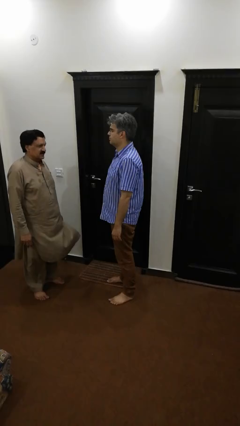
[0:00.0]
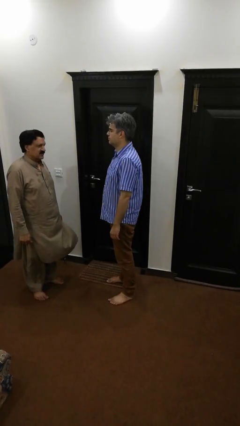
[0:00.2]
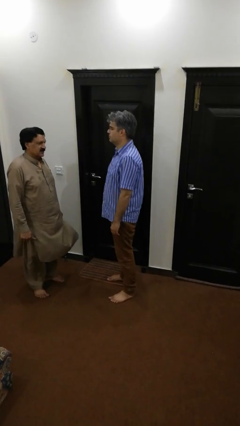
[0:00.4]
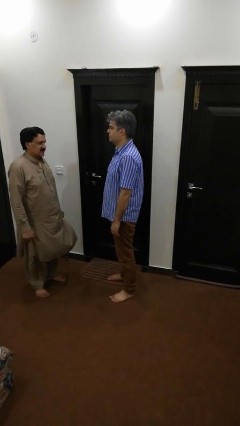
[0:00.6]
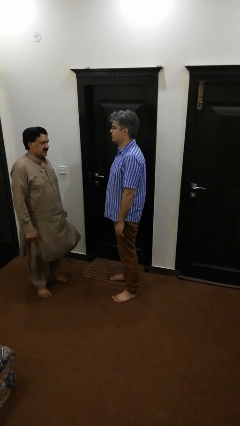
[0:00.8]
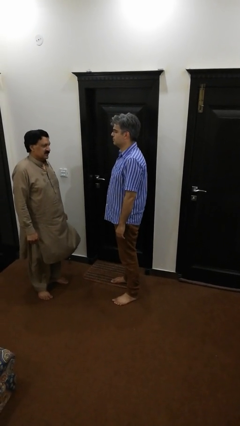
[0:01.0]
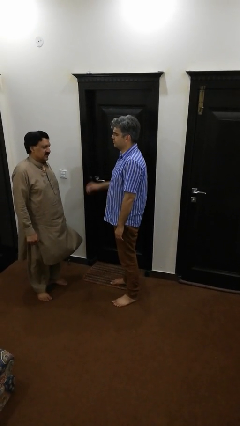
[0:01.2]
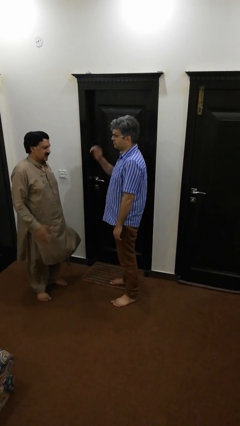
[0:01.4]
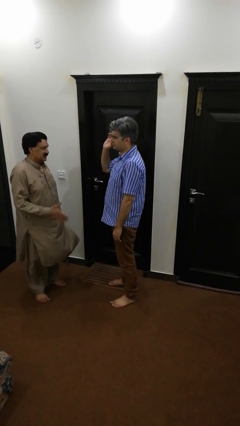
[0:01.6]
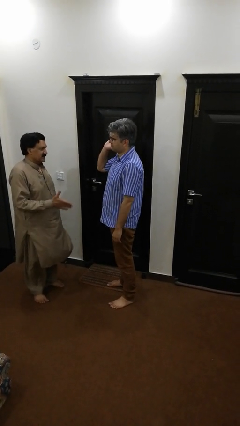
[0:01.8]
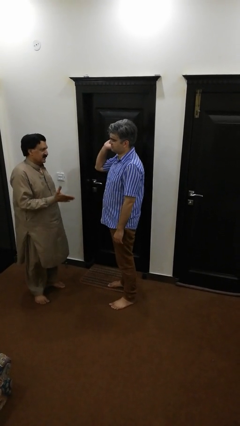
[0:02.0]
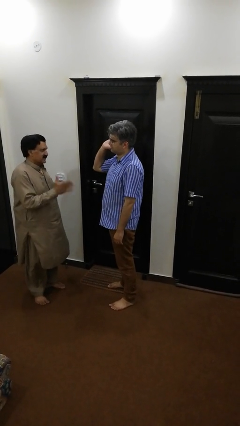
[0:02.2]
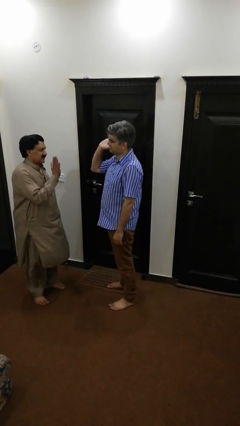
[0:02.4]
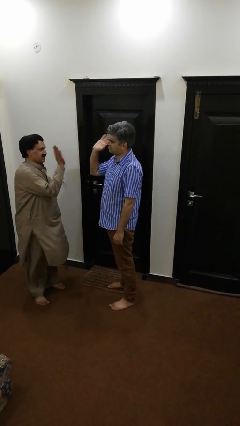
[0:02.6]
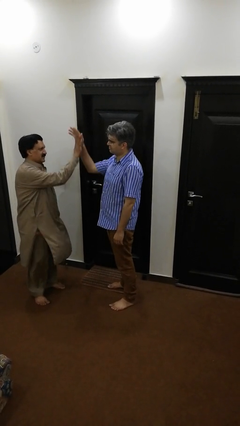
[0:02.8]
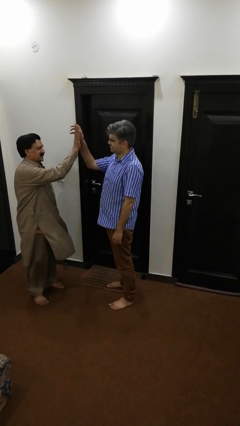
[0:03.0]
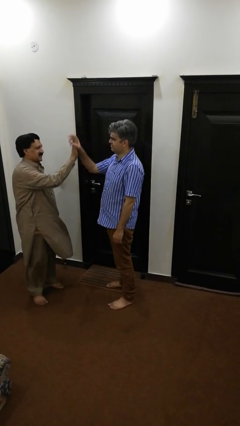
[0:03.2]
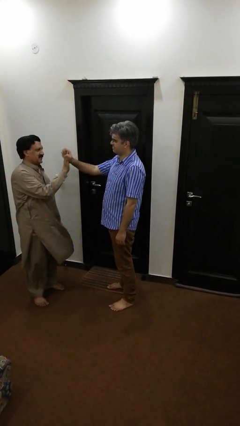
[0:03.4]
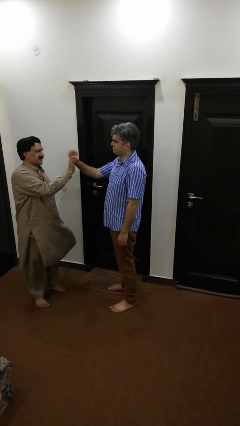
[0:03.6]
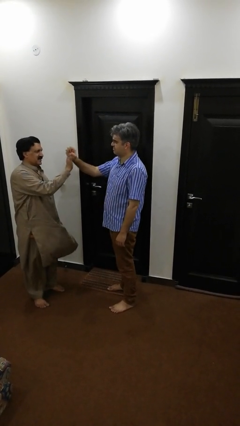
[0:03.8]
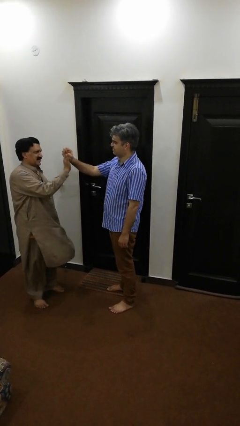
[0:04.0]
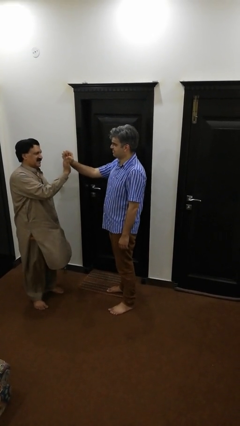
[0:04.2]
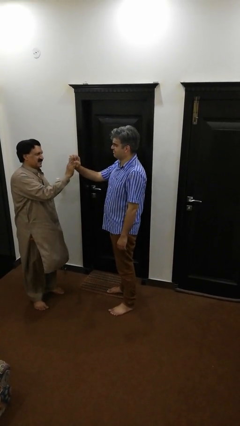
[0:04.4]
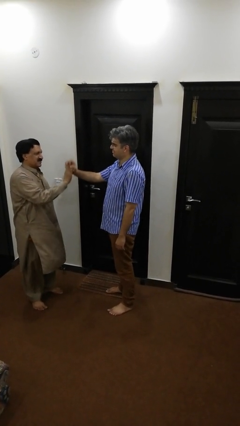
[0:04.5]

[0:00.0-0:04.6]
person highfives hand

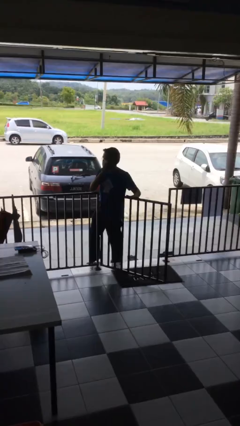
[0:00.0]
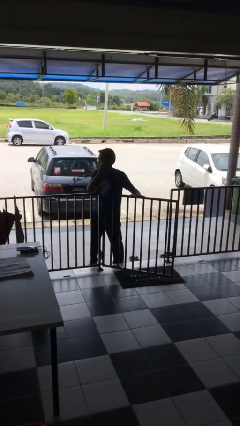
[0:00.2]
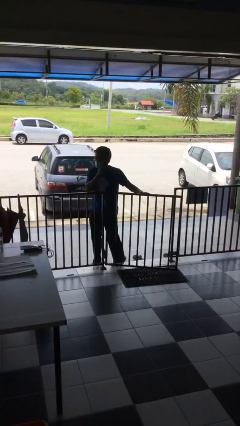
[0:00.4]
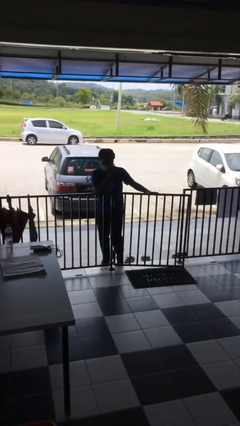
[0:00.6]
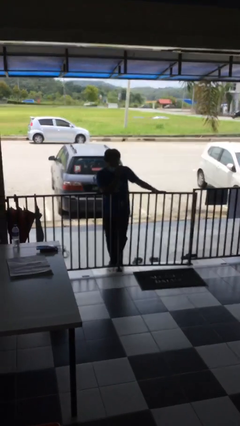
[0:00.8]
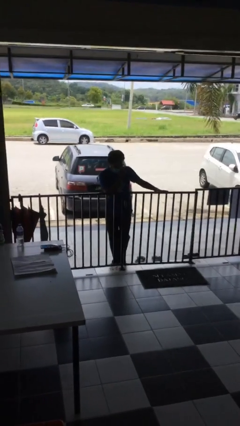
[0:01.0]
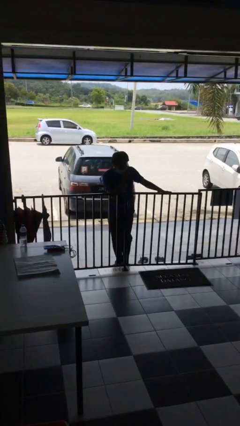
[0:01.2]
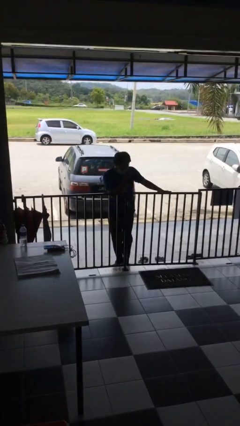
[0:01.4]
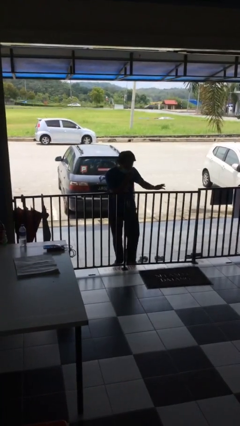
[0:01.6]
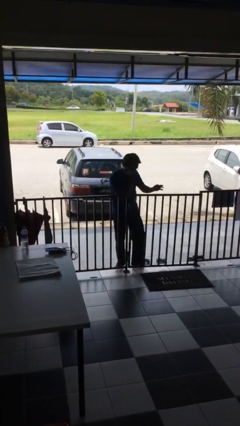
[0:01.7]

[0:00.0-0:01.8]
person closes facility door

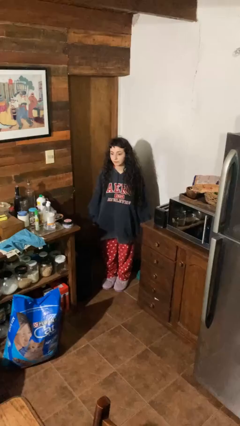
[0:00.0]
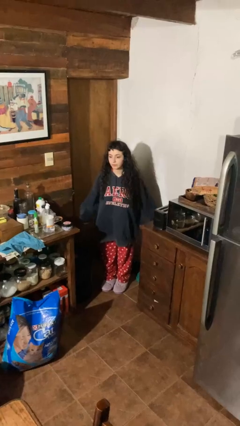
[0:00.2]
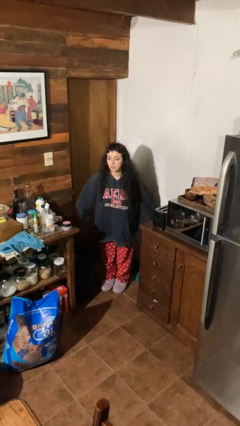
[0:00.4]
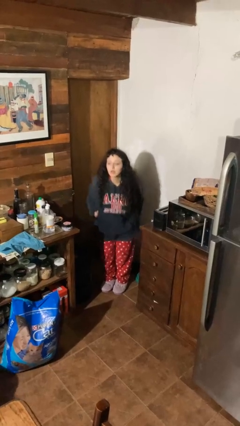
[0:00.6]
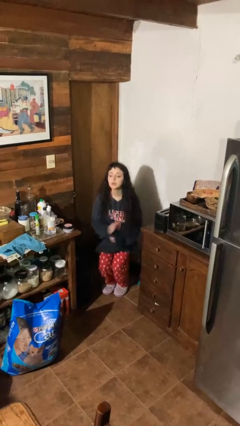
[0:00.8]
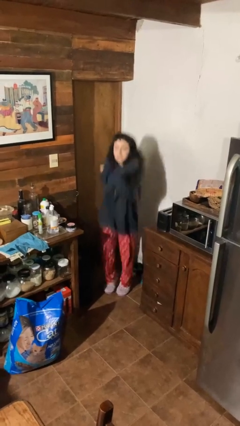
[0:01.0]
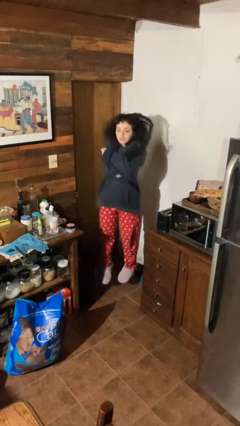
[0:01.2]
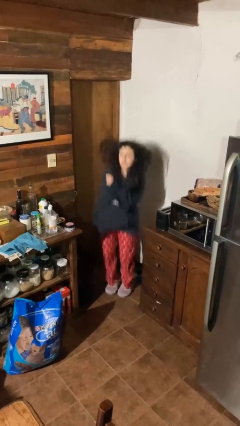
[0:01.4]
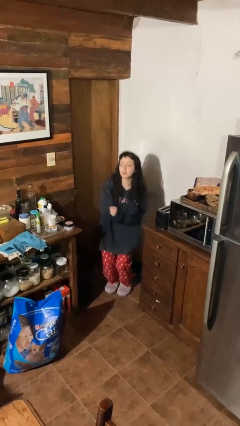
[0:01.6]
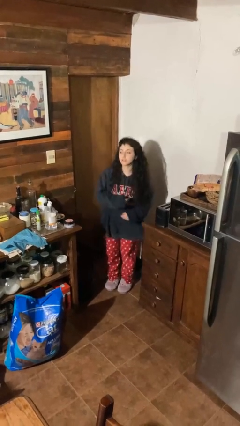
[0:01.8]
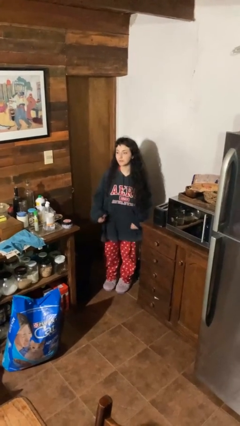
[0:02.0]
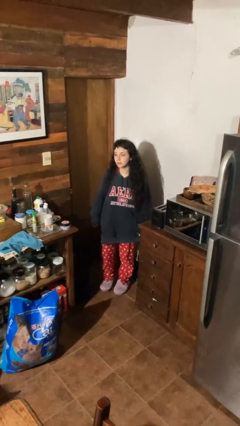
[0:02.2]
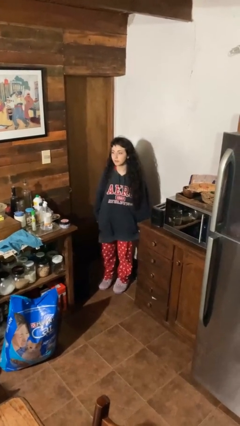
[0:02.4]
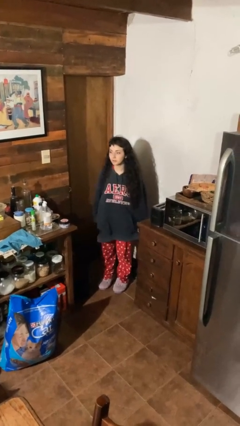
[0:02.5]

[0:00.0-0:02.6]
person jumps

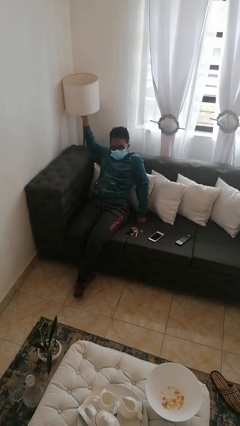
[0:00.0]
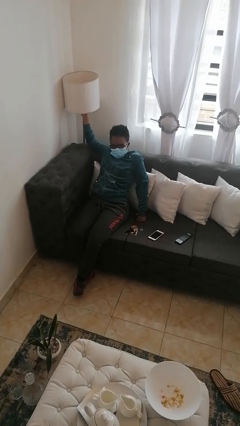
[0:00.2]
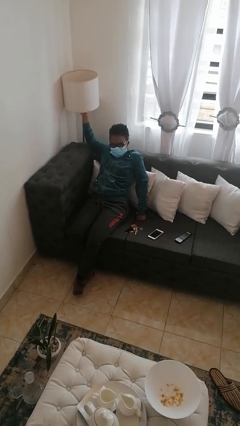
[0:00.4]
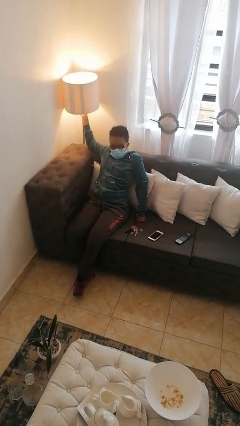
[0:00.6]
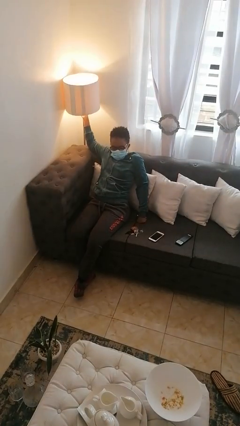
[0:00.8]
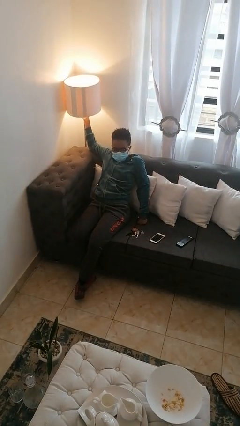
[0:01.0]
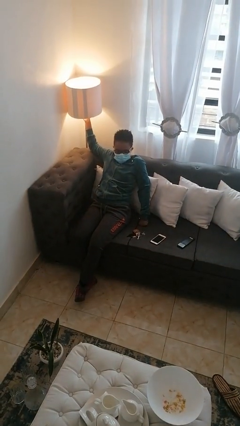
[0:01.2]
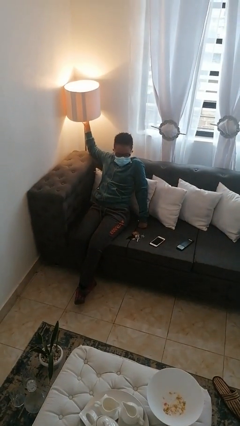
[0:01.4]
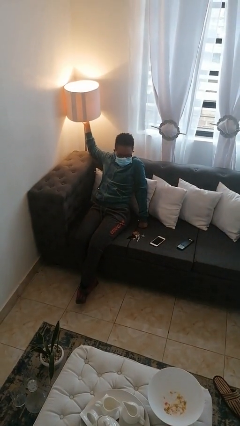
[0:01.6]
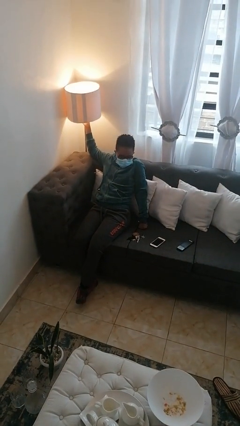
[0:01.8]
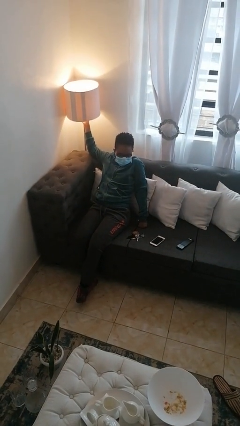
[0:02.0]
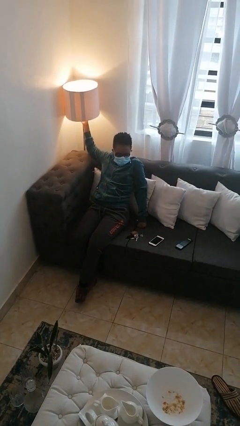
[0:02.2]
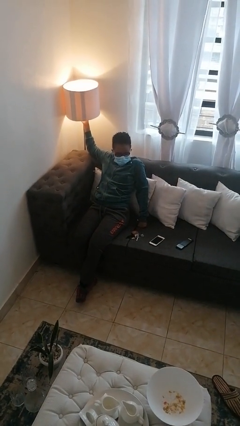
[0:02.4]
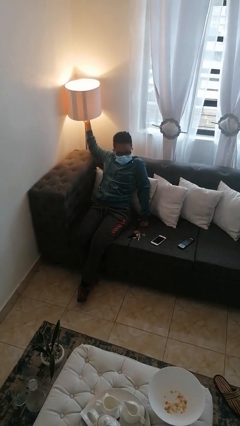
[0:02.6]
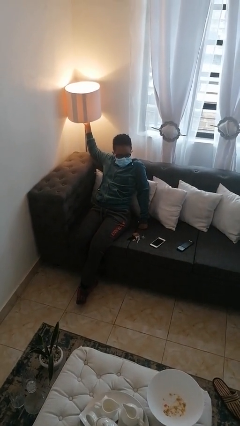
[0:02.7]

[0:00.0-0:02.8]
person turns on lamp

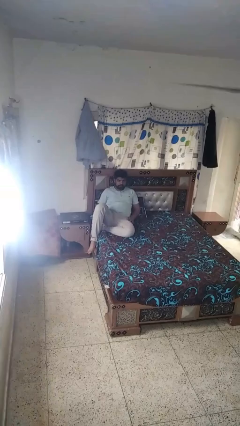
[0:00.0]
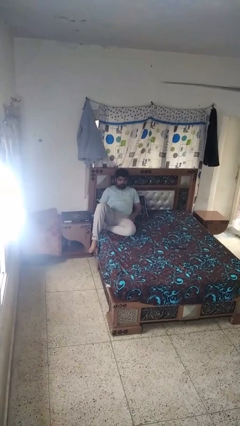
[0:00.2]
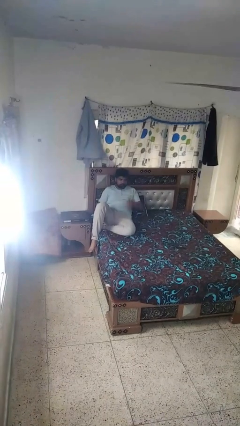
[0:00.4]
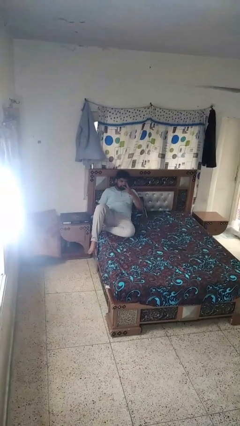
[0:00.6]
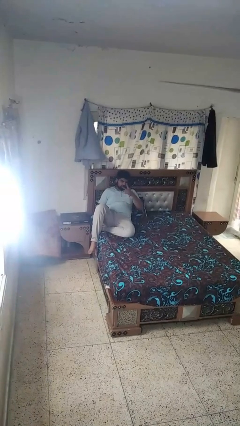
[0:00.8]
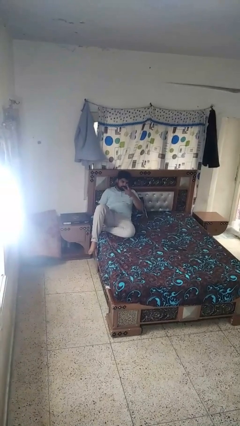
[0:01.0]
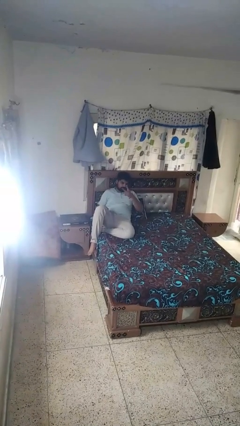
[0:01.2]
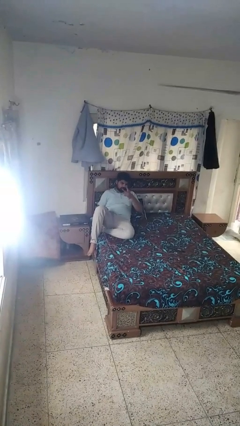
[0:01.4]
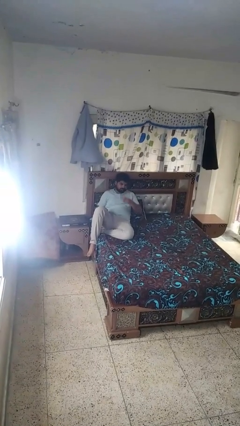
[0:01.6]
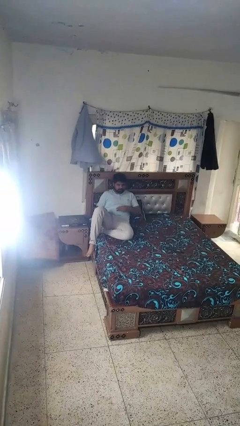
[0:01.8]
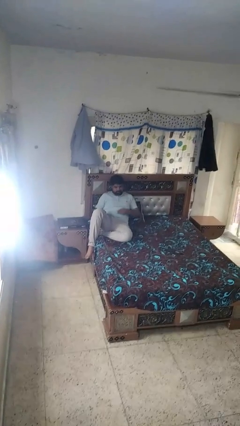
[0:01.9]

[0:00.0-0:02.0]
person gestures peace

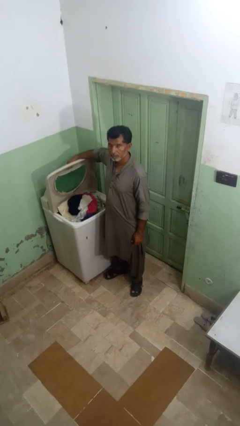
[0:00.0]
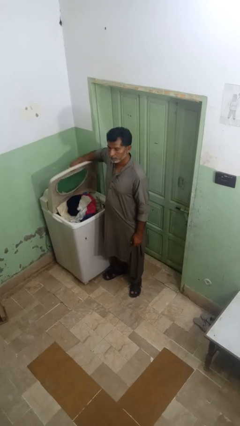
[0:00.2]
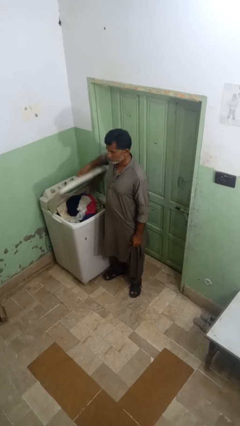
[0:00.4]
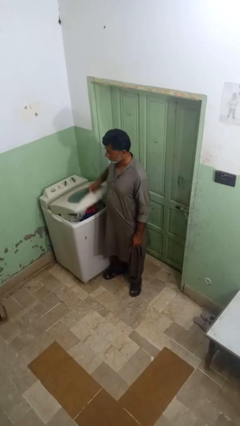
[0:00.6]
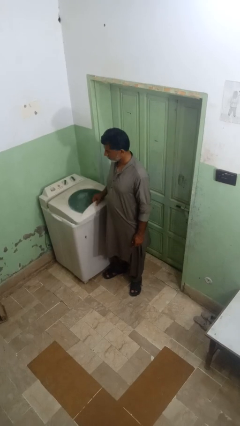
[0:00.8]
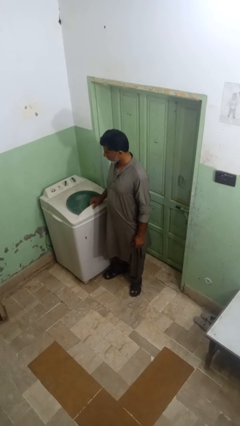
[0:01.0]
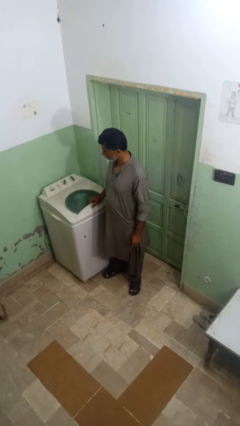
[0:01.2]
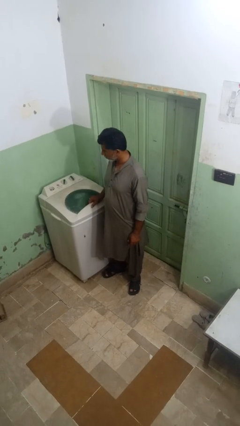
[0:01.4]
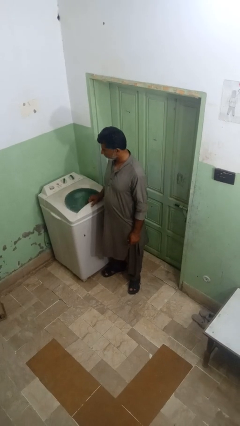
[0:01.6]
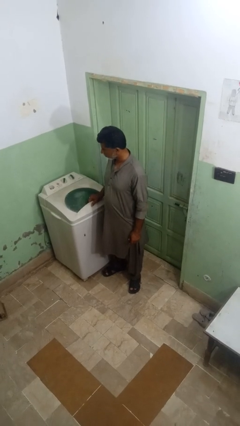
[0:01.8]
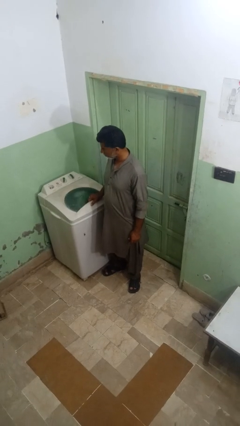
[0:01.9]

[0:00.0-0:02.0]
person closes clothes washer

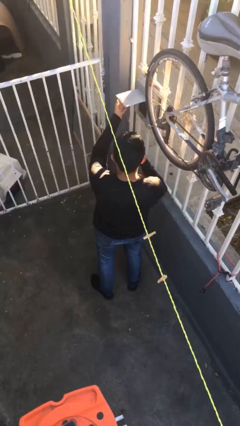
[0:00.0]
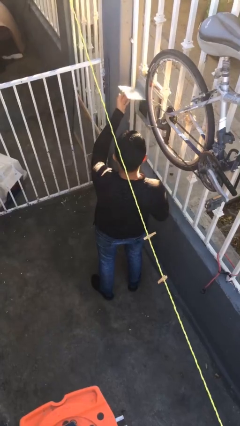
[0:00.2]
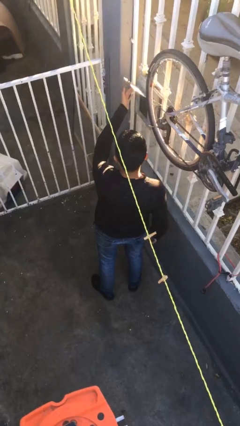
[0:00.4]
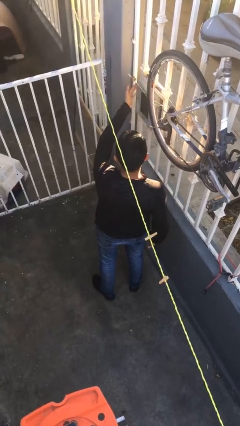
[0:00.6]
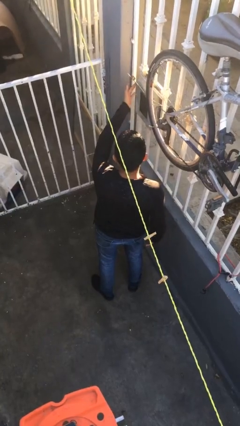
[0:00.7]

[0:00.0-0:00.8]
person opens mailbox

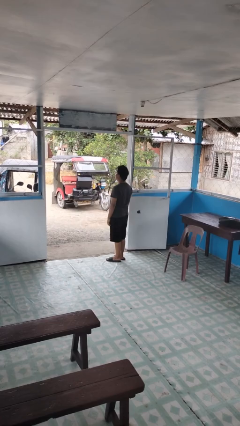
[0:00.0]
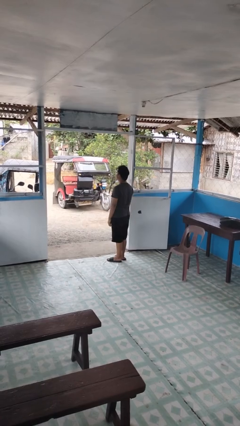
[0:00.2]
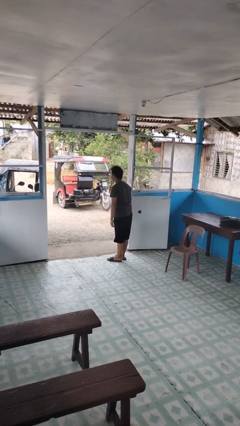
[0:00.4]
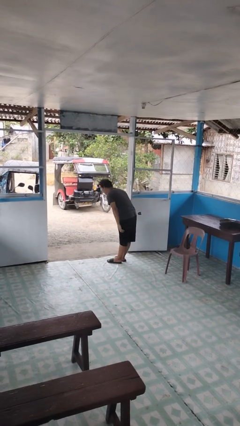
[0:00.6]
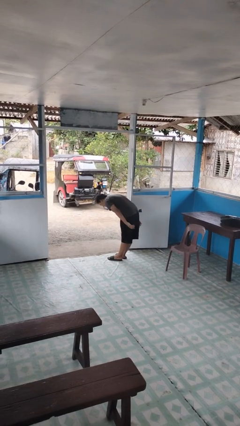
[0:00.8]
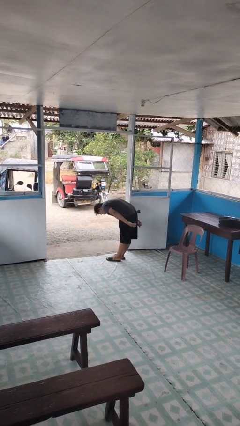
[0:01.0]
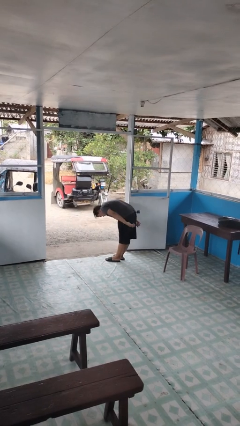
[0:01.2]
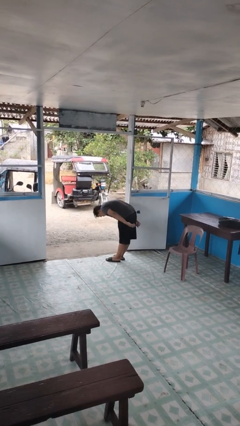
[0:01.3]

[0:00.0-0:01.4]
person bows
